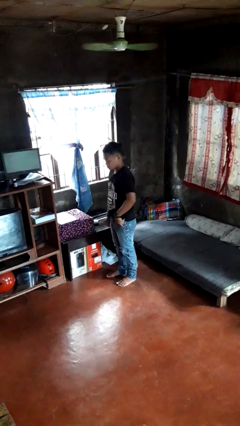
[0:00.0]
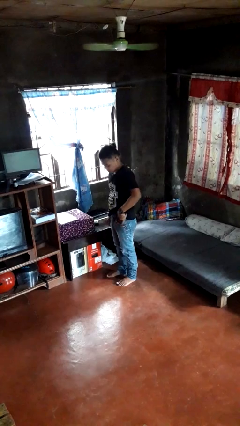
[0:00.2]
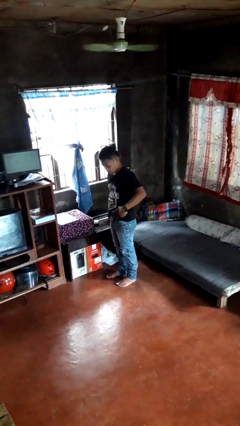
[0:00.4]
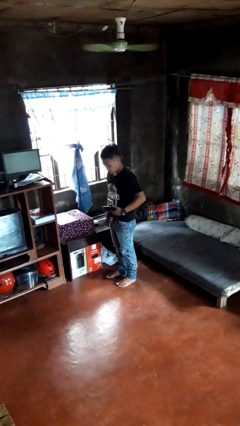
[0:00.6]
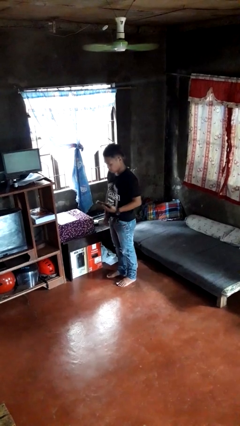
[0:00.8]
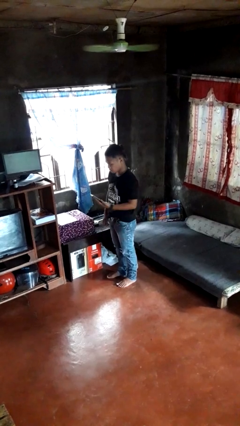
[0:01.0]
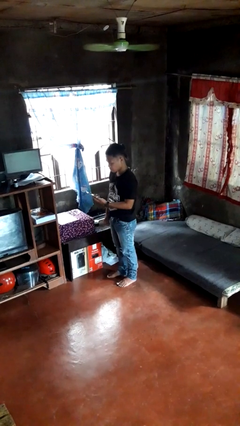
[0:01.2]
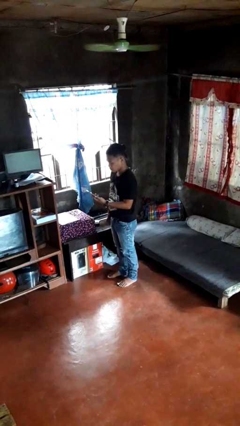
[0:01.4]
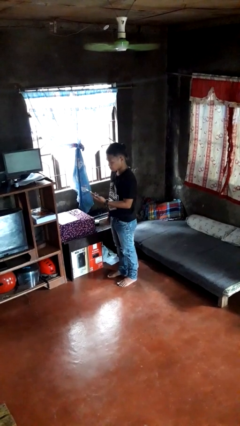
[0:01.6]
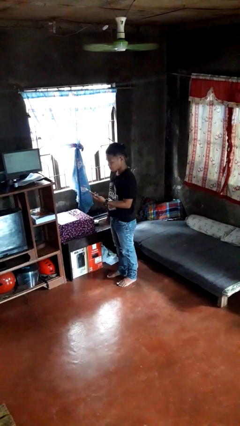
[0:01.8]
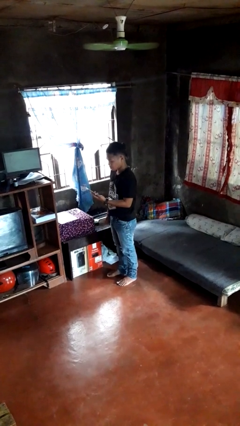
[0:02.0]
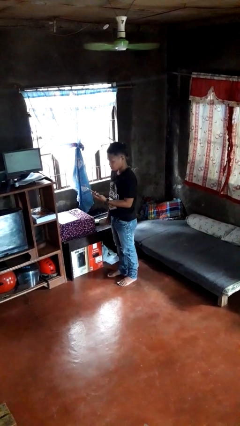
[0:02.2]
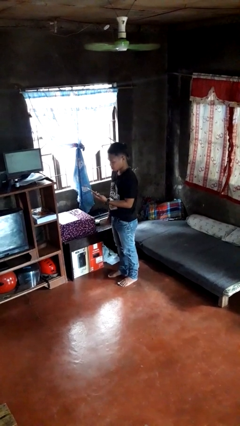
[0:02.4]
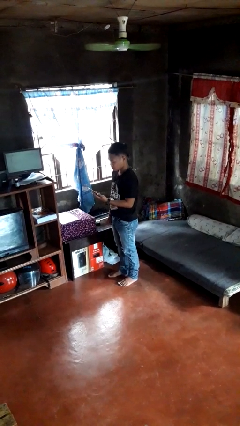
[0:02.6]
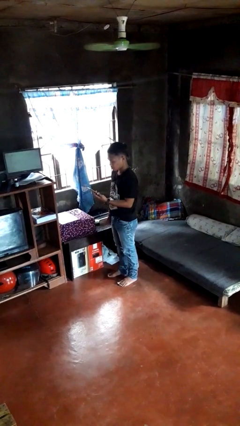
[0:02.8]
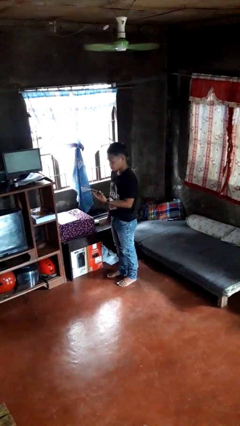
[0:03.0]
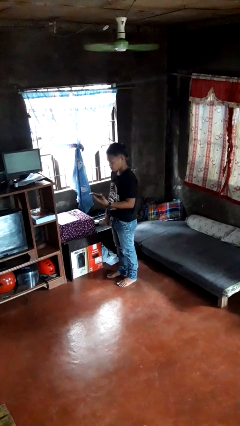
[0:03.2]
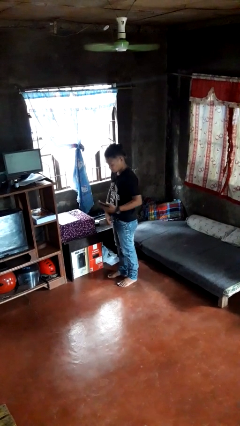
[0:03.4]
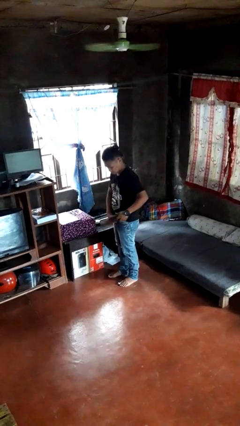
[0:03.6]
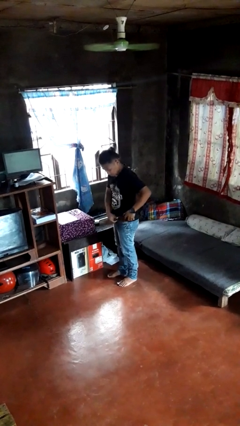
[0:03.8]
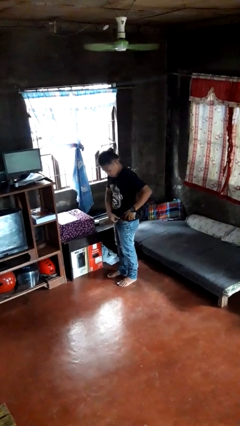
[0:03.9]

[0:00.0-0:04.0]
person takes phone from pocket

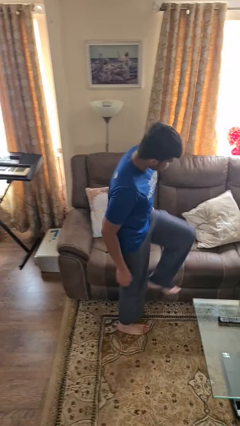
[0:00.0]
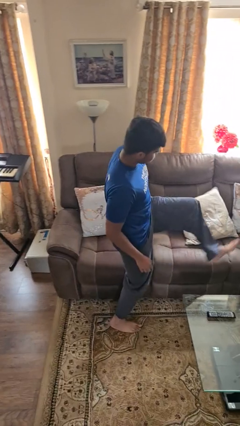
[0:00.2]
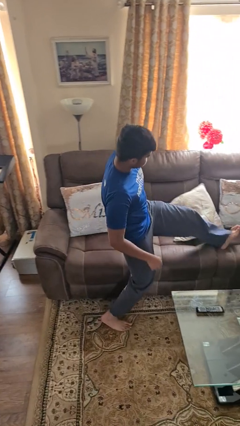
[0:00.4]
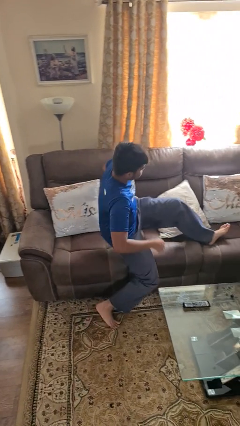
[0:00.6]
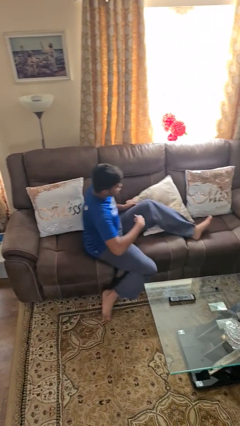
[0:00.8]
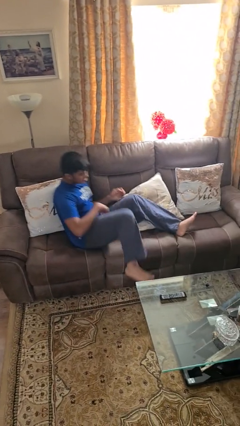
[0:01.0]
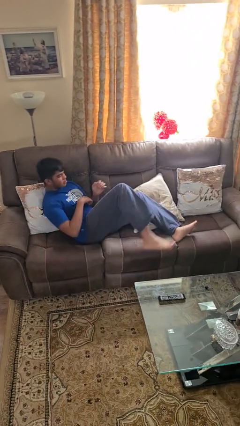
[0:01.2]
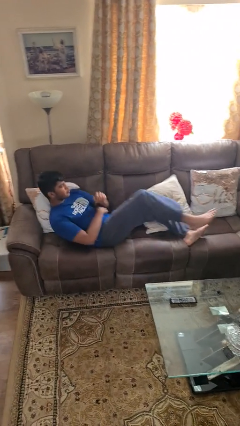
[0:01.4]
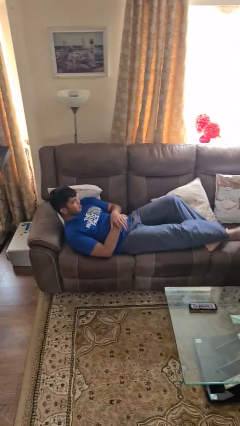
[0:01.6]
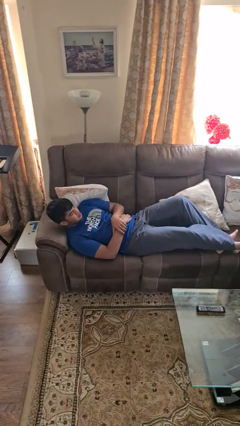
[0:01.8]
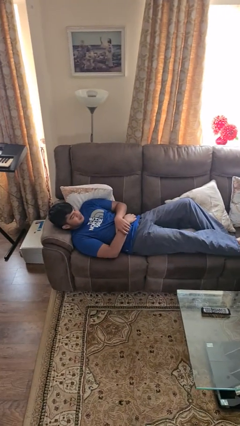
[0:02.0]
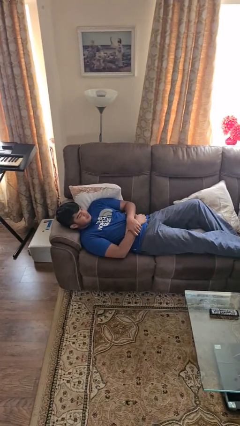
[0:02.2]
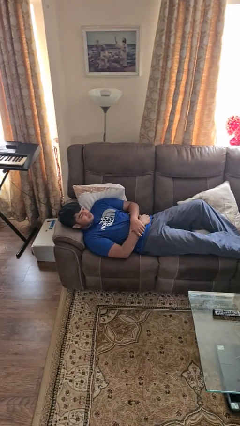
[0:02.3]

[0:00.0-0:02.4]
person lies down on couch

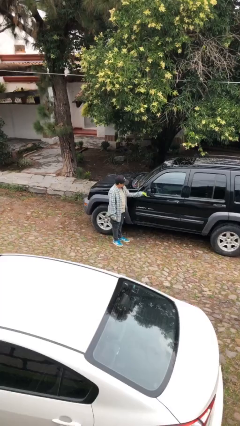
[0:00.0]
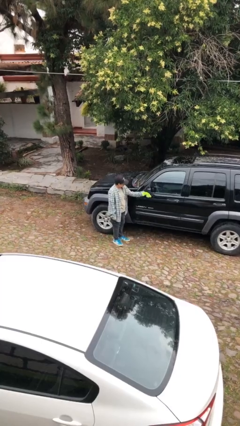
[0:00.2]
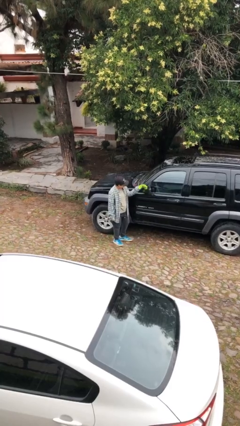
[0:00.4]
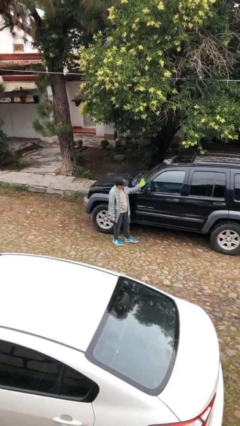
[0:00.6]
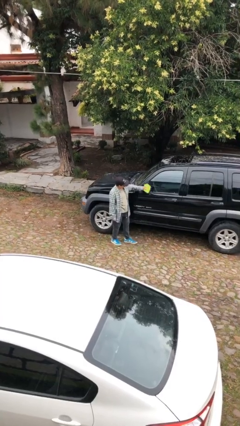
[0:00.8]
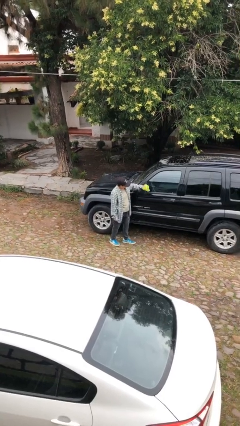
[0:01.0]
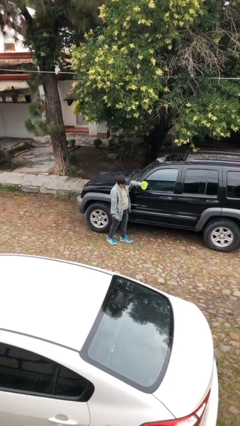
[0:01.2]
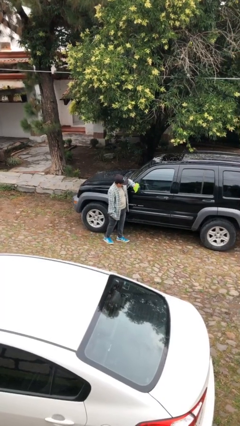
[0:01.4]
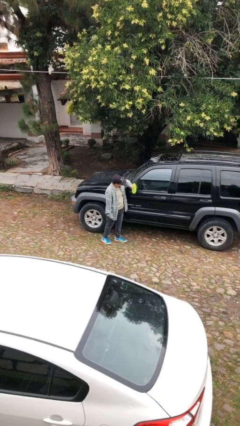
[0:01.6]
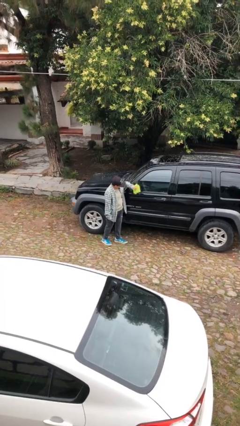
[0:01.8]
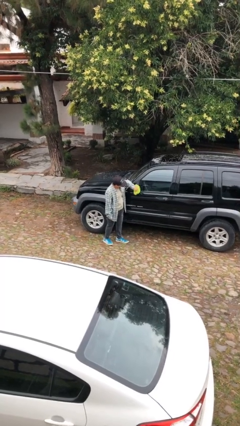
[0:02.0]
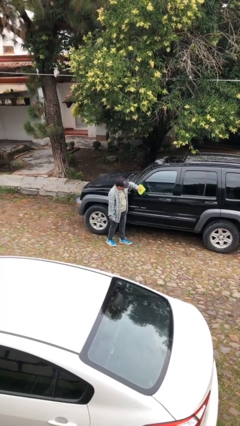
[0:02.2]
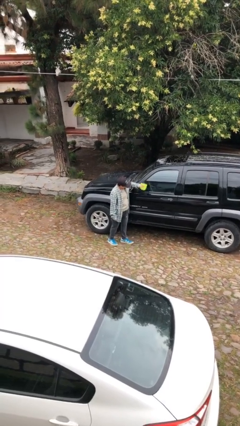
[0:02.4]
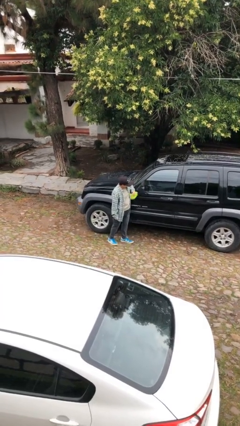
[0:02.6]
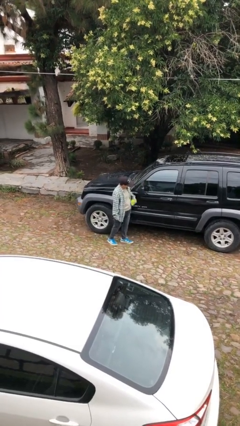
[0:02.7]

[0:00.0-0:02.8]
person polishes car with rag

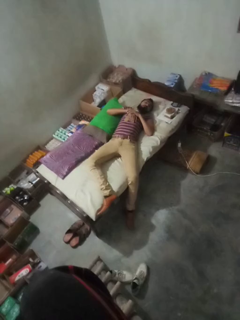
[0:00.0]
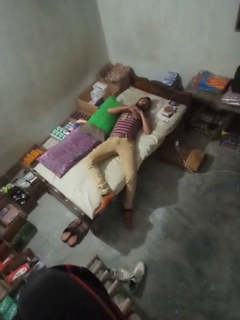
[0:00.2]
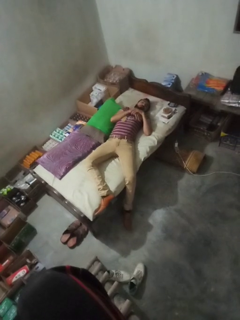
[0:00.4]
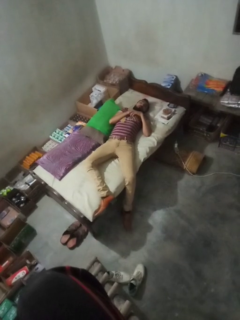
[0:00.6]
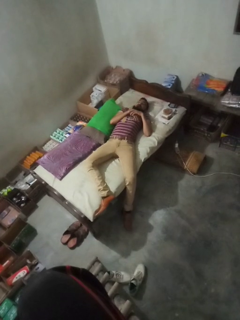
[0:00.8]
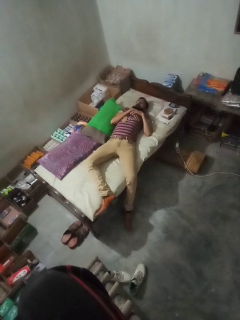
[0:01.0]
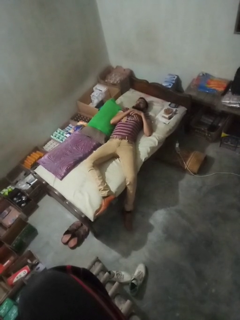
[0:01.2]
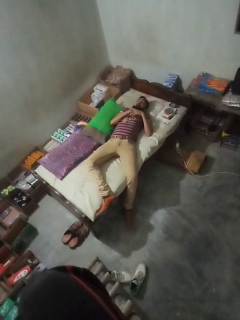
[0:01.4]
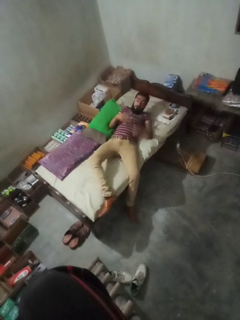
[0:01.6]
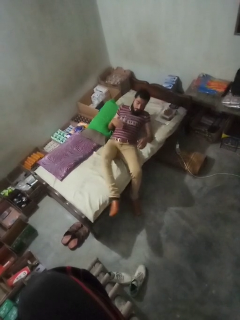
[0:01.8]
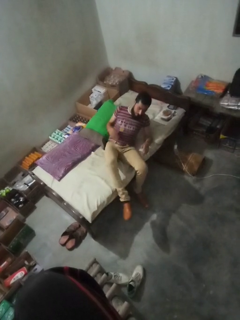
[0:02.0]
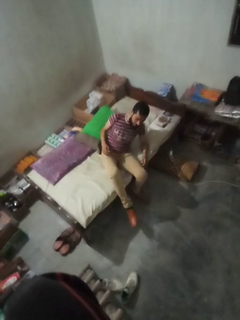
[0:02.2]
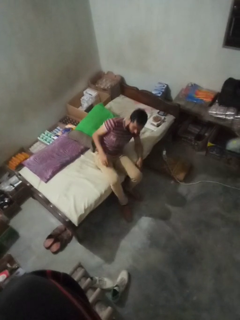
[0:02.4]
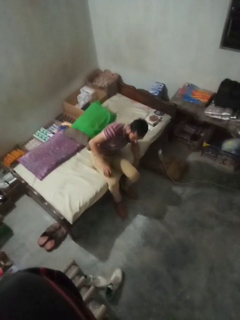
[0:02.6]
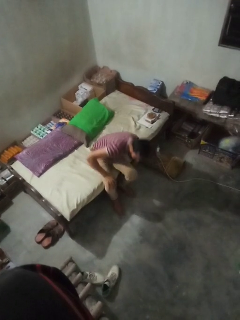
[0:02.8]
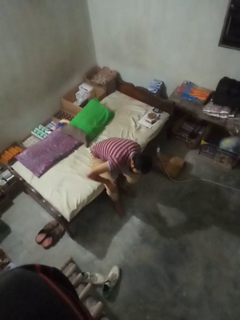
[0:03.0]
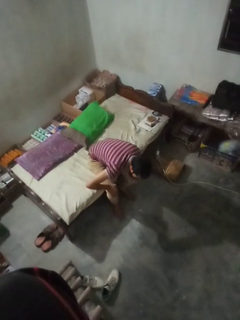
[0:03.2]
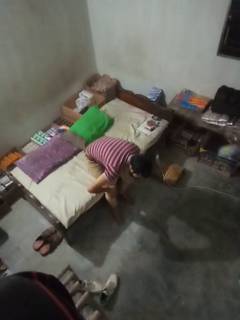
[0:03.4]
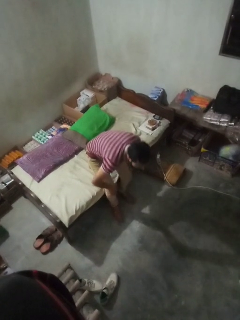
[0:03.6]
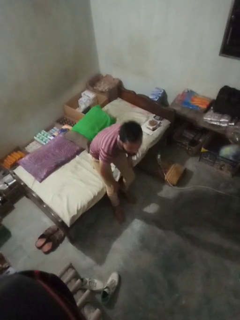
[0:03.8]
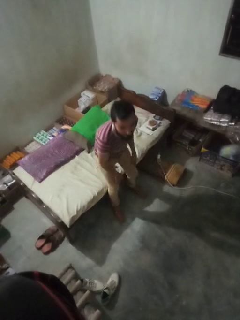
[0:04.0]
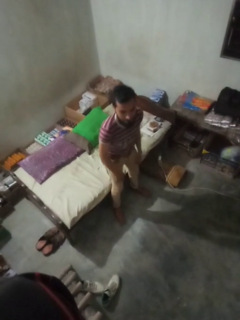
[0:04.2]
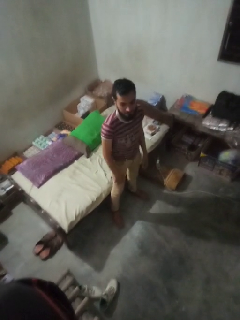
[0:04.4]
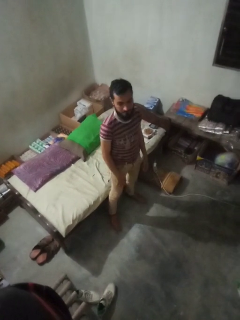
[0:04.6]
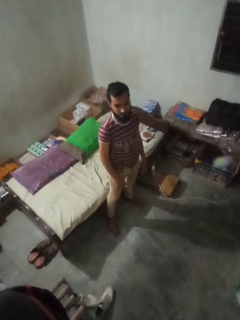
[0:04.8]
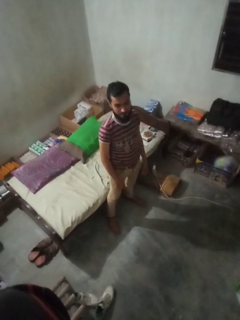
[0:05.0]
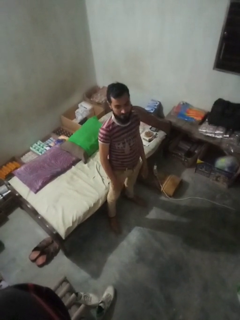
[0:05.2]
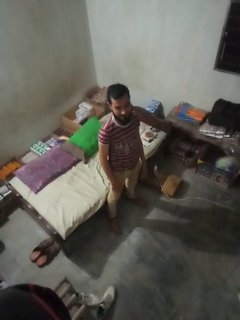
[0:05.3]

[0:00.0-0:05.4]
person stands up

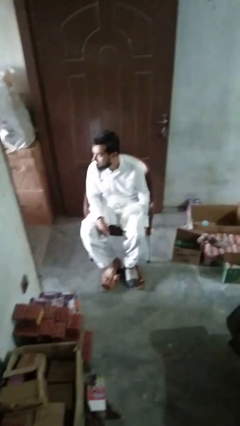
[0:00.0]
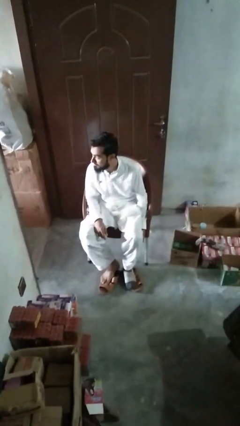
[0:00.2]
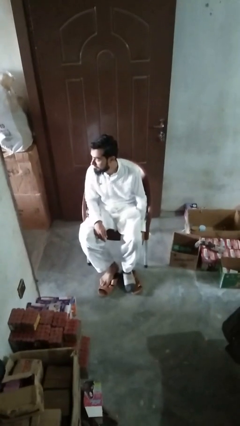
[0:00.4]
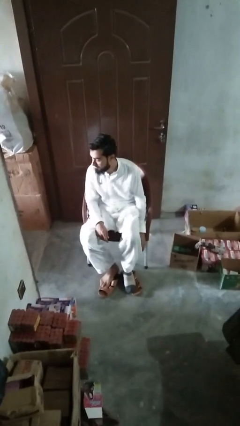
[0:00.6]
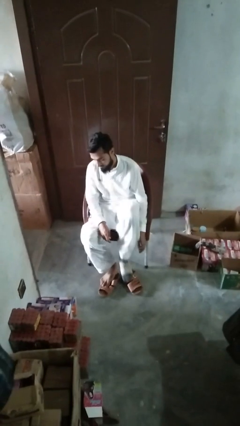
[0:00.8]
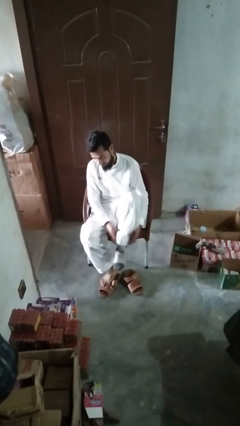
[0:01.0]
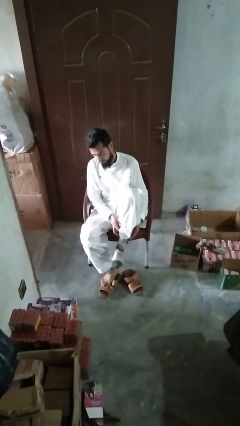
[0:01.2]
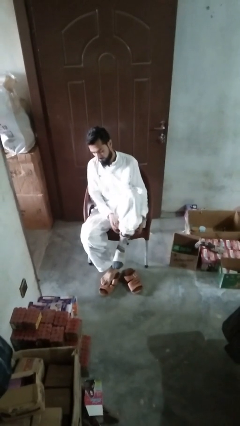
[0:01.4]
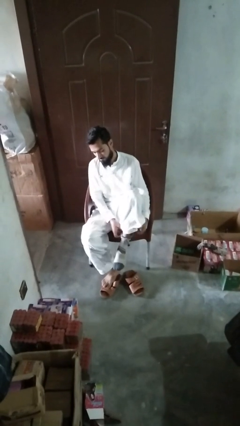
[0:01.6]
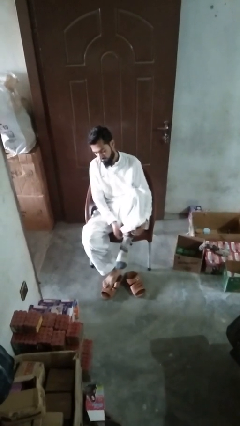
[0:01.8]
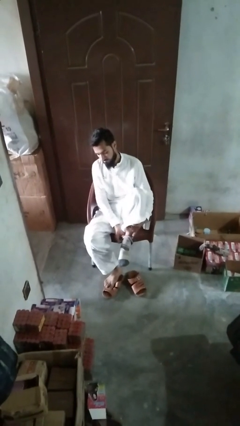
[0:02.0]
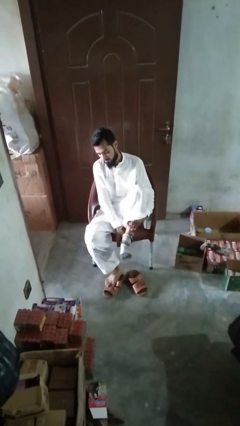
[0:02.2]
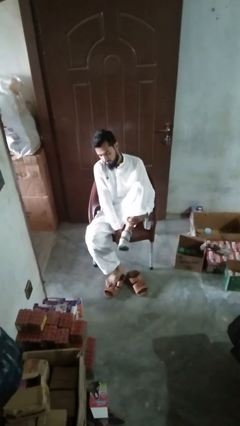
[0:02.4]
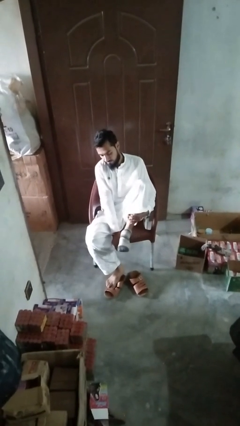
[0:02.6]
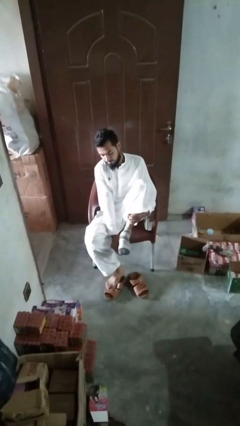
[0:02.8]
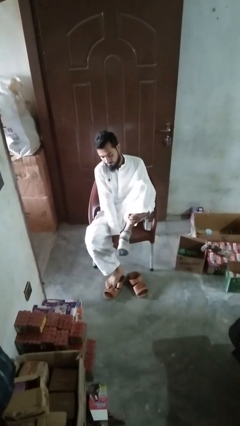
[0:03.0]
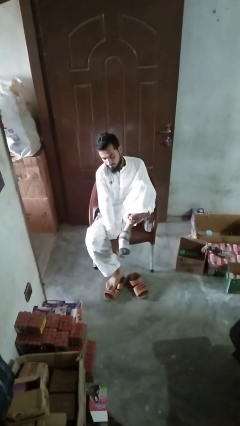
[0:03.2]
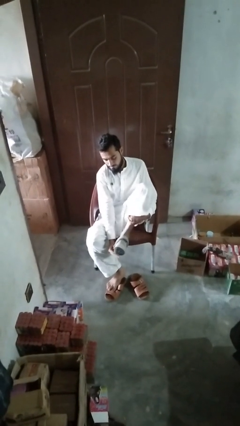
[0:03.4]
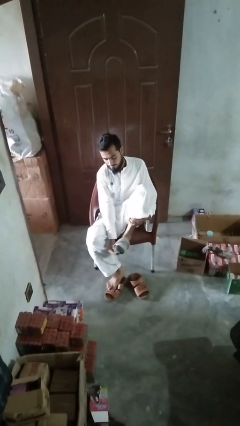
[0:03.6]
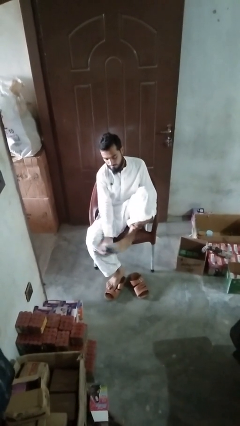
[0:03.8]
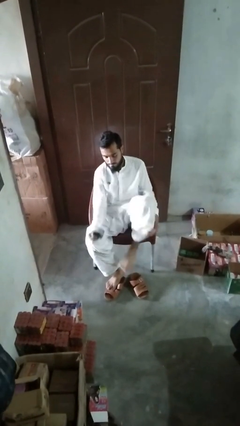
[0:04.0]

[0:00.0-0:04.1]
person takes off socks
